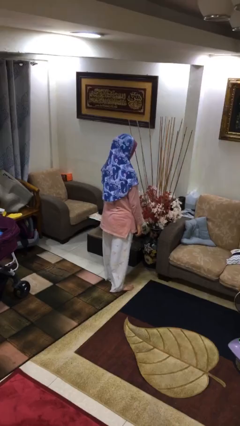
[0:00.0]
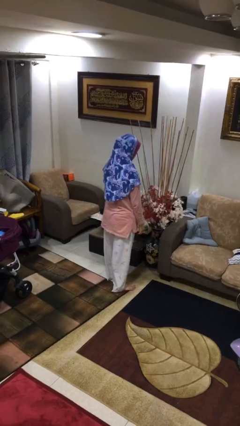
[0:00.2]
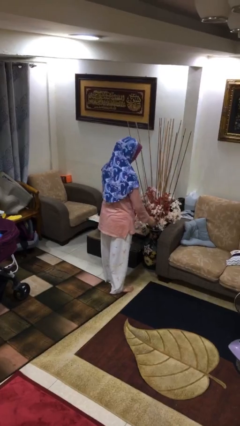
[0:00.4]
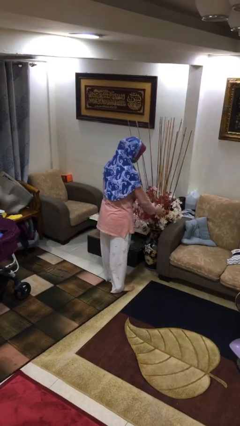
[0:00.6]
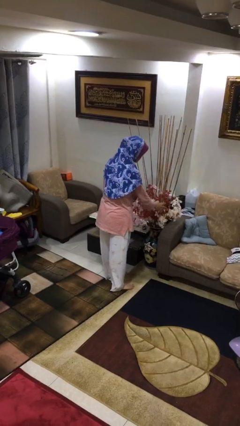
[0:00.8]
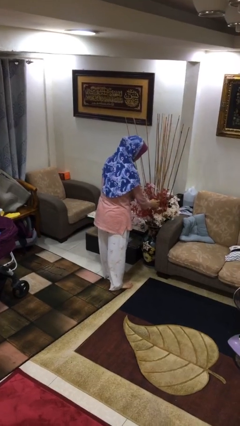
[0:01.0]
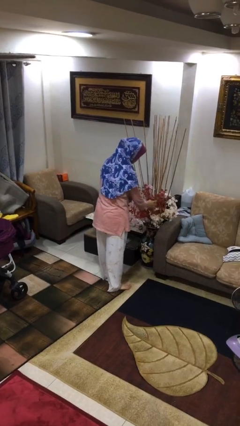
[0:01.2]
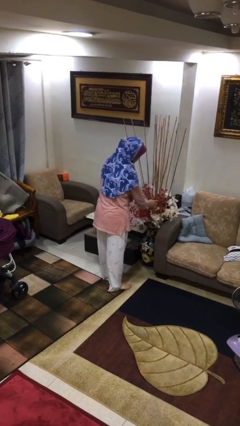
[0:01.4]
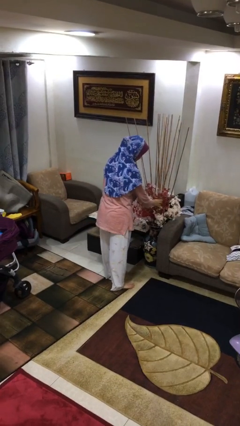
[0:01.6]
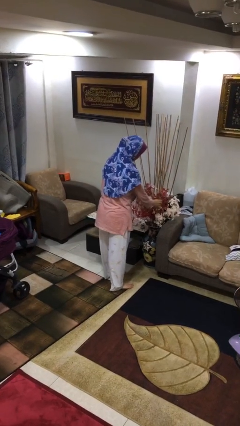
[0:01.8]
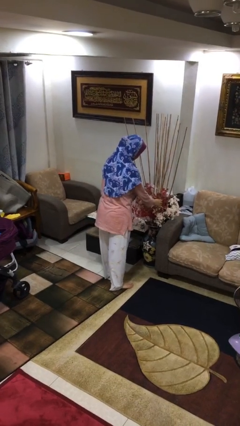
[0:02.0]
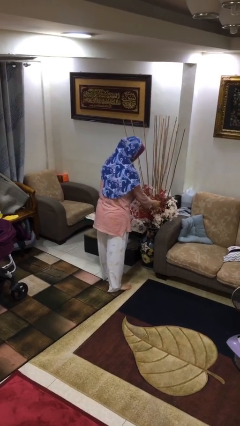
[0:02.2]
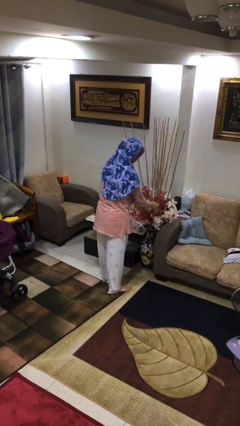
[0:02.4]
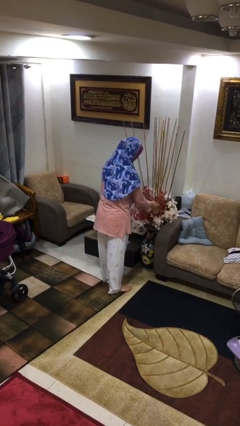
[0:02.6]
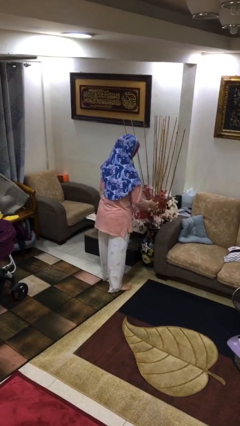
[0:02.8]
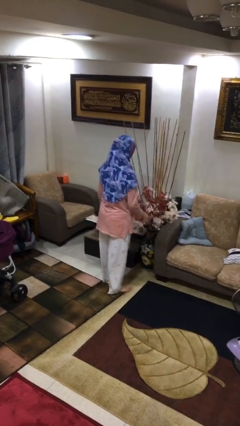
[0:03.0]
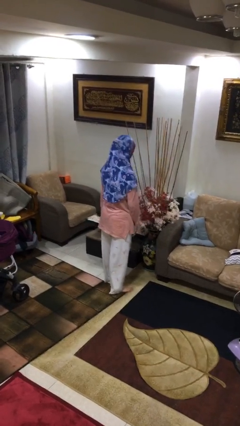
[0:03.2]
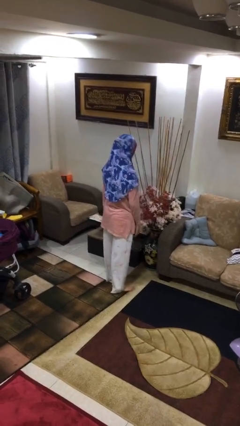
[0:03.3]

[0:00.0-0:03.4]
person arranges flowers in vase

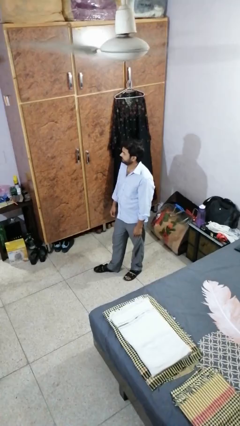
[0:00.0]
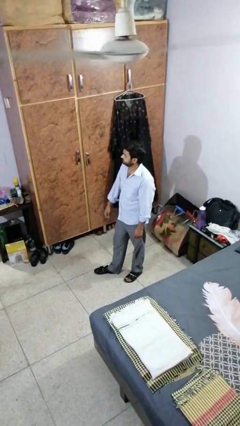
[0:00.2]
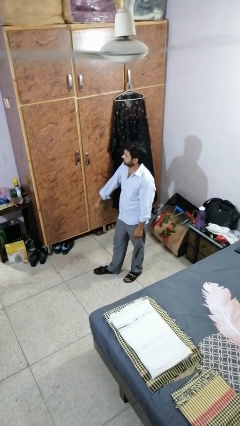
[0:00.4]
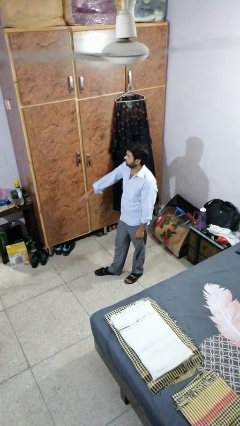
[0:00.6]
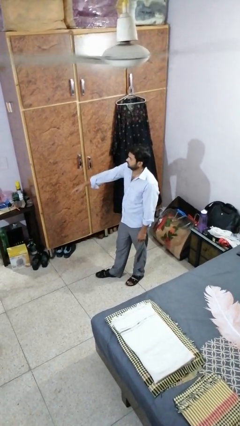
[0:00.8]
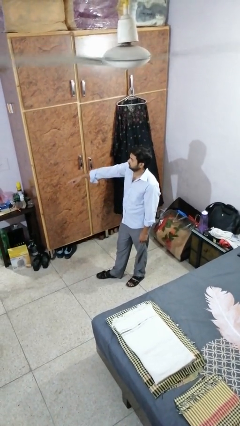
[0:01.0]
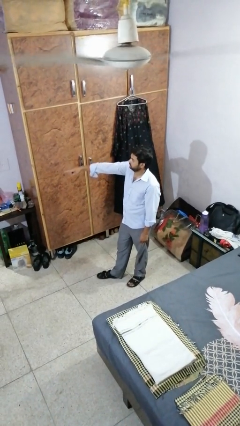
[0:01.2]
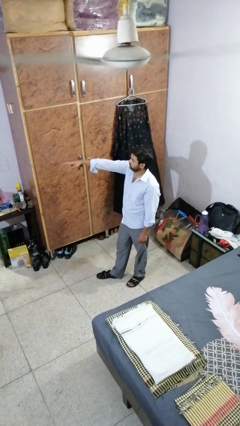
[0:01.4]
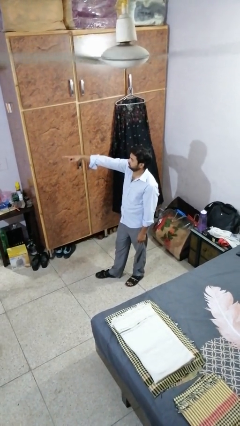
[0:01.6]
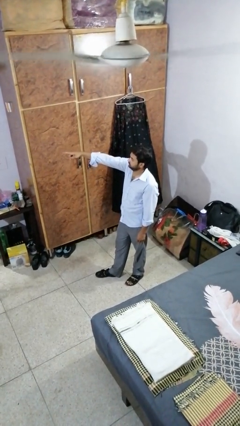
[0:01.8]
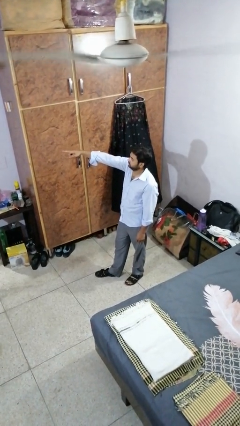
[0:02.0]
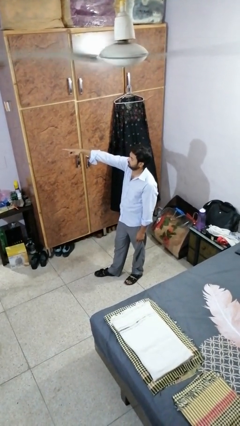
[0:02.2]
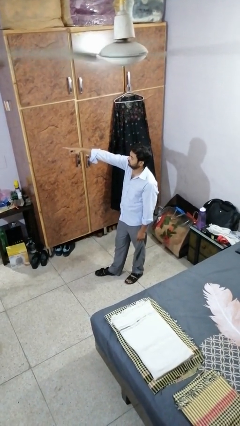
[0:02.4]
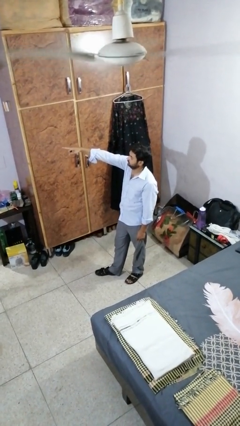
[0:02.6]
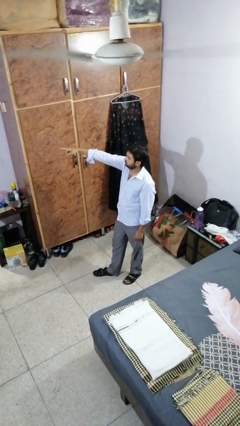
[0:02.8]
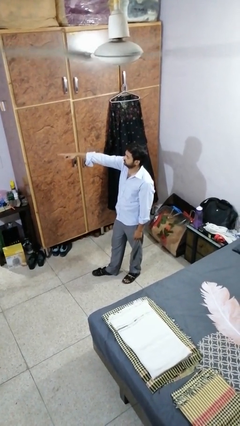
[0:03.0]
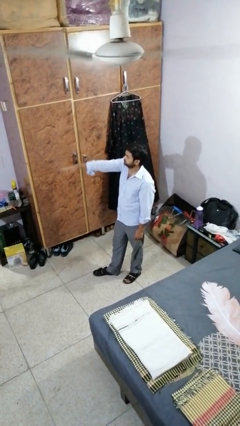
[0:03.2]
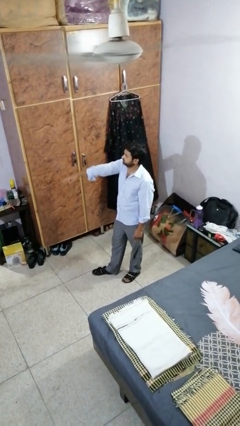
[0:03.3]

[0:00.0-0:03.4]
person points at person

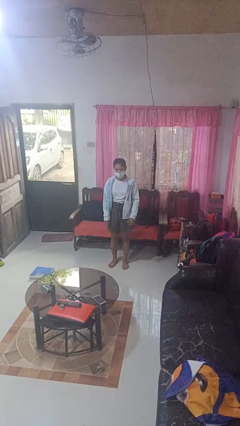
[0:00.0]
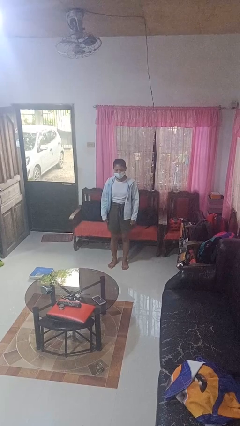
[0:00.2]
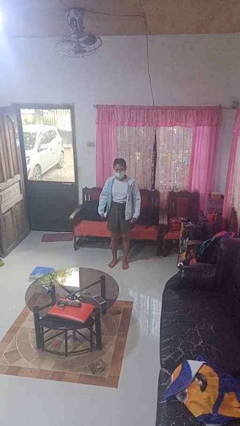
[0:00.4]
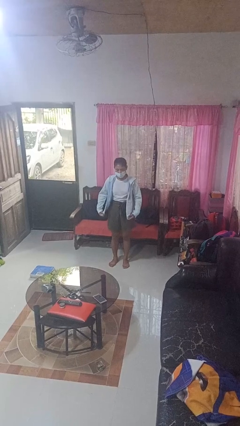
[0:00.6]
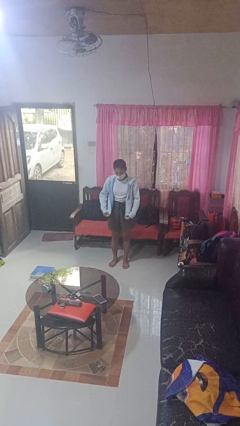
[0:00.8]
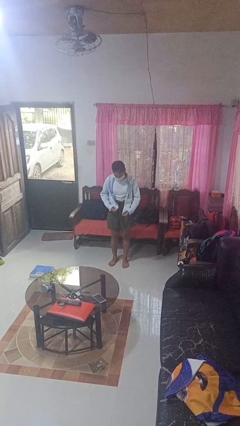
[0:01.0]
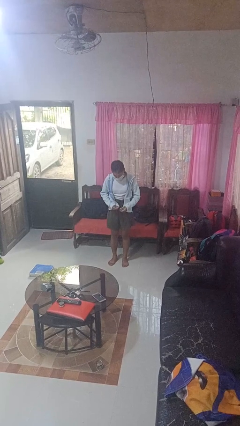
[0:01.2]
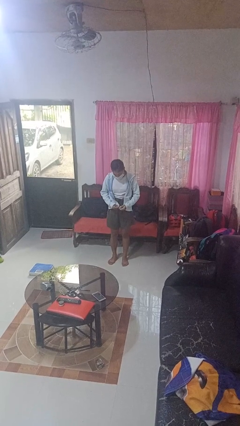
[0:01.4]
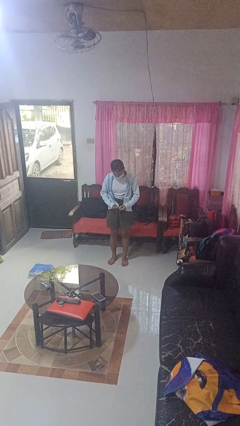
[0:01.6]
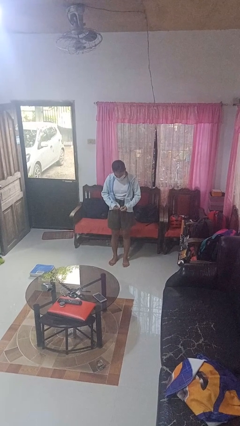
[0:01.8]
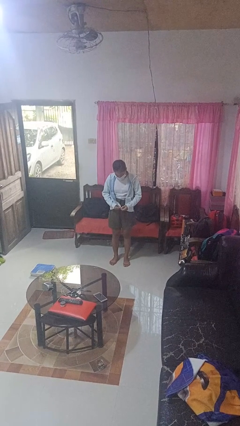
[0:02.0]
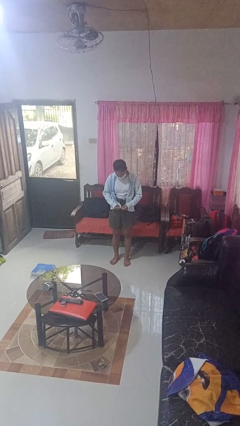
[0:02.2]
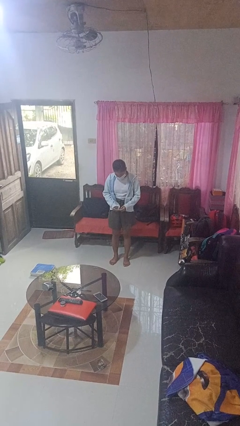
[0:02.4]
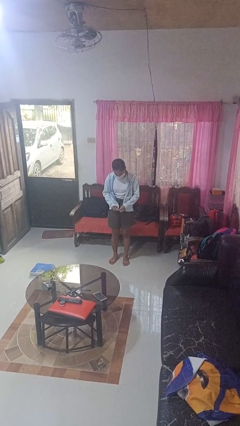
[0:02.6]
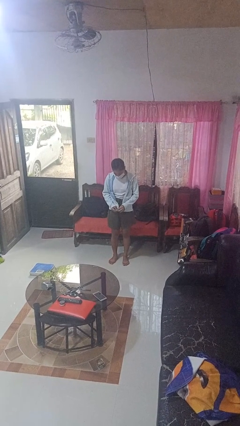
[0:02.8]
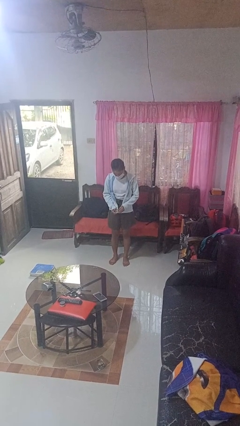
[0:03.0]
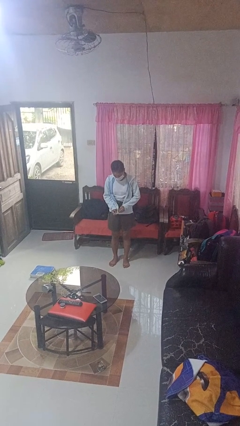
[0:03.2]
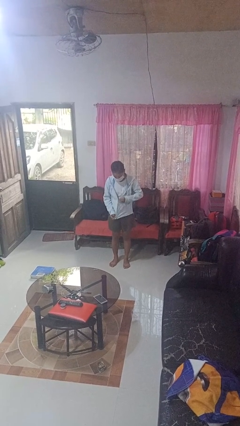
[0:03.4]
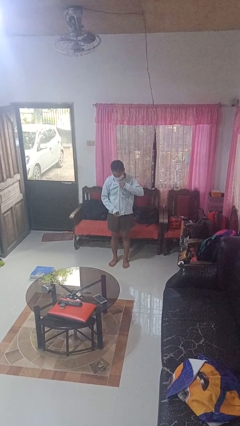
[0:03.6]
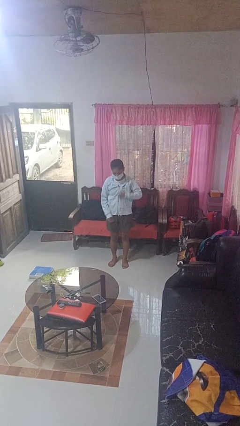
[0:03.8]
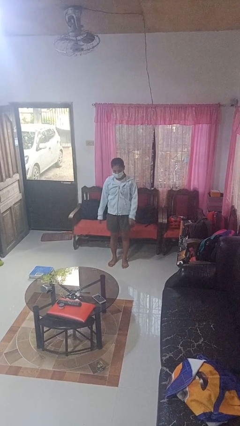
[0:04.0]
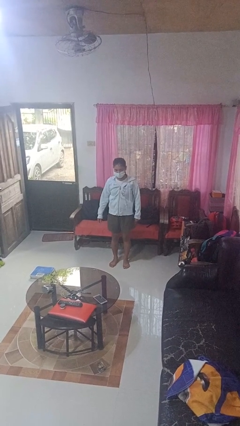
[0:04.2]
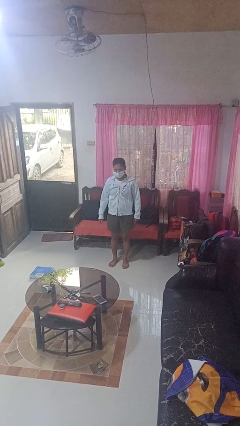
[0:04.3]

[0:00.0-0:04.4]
person zips up jacket

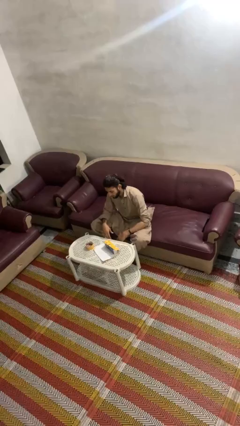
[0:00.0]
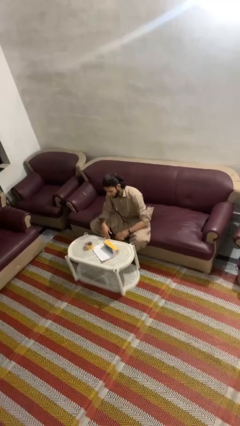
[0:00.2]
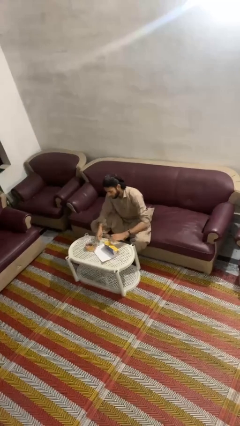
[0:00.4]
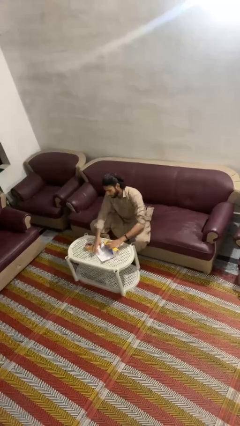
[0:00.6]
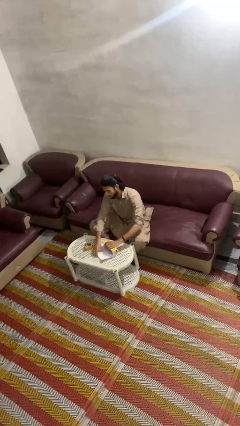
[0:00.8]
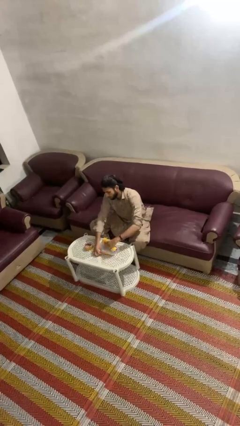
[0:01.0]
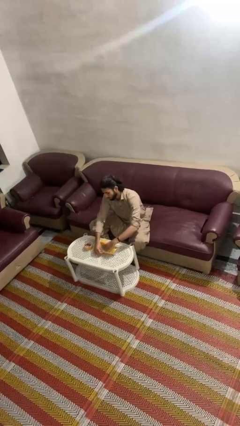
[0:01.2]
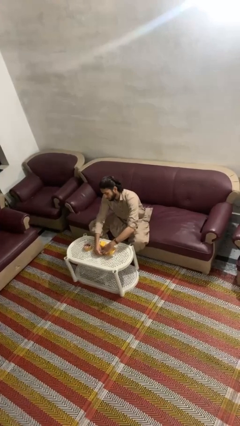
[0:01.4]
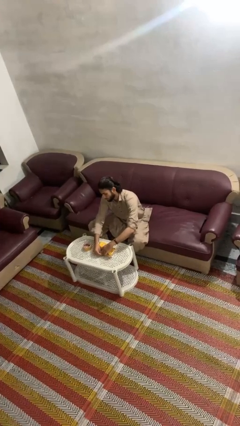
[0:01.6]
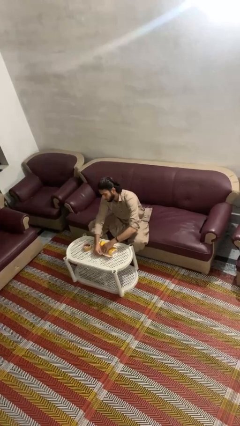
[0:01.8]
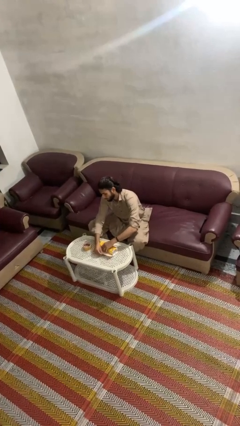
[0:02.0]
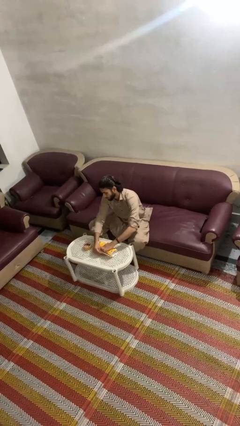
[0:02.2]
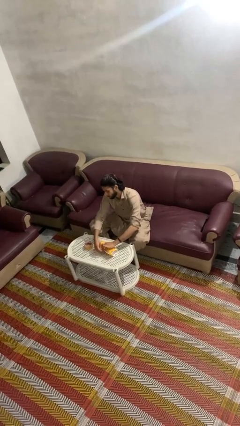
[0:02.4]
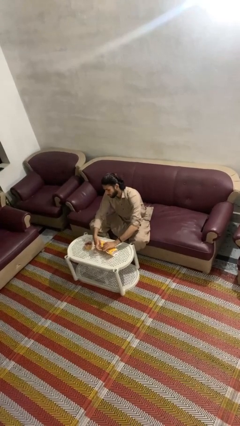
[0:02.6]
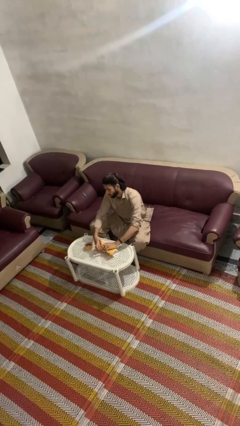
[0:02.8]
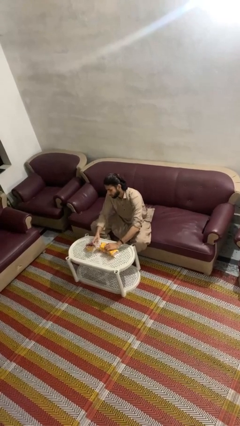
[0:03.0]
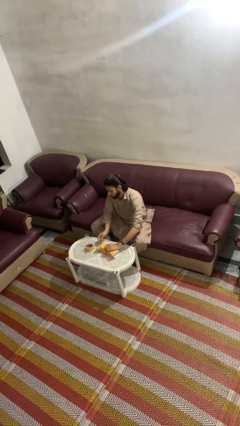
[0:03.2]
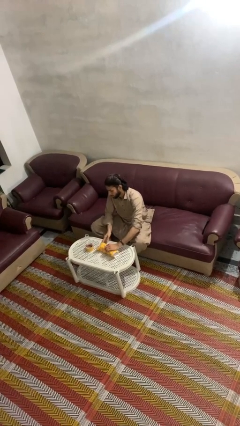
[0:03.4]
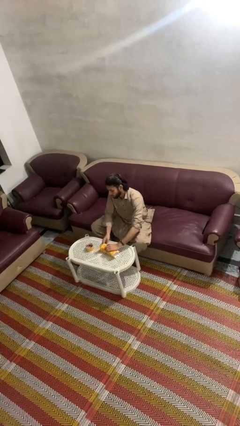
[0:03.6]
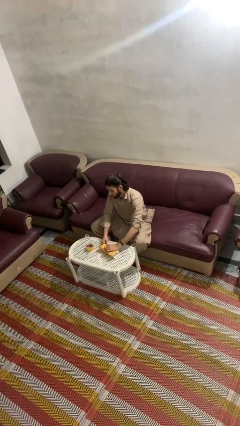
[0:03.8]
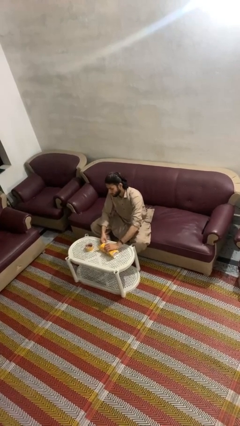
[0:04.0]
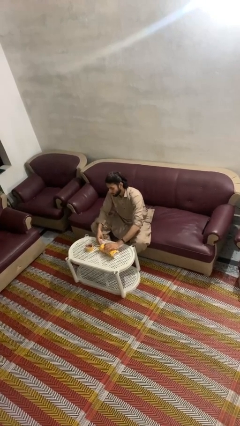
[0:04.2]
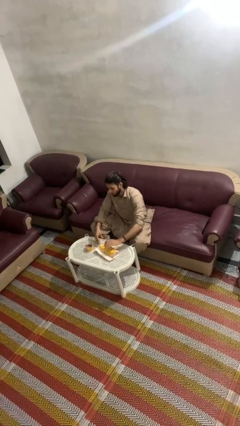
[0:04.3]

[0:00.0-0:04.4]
person wraps box

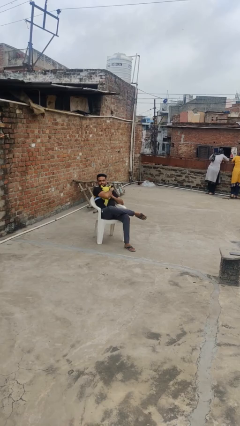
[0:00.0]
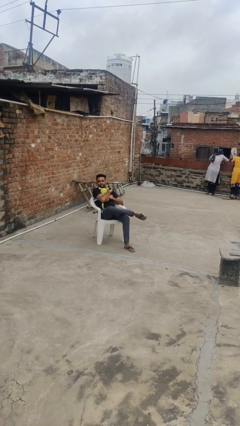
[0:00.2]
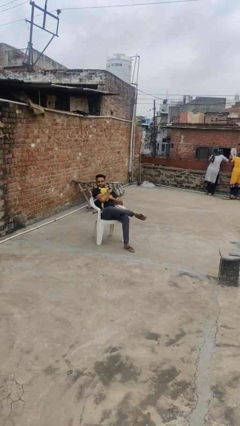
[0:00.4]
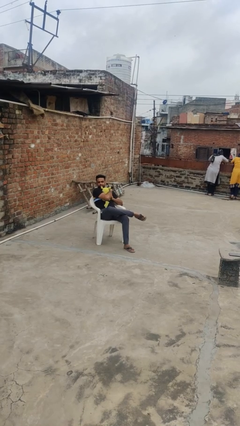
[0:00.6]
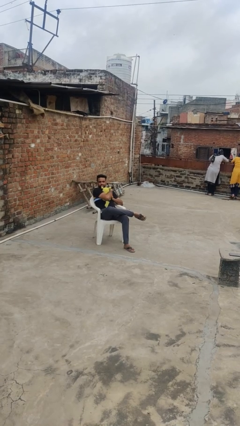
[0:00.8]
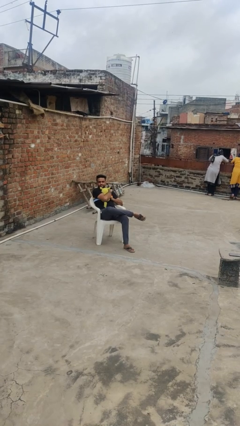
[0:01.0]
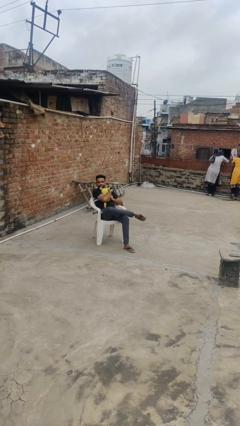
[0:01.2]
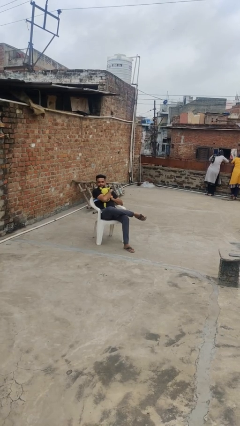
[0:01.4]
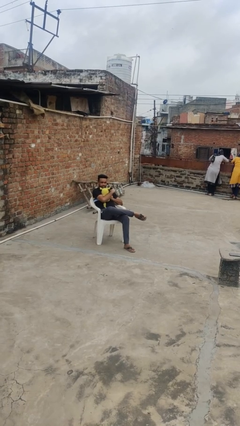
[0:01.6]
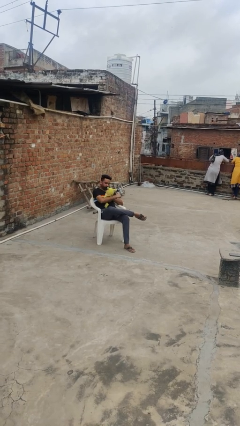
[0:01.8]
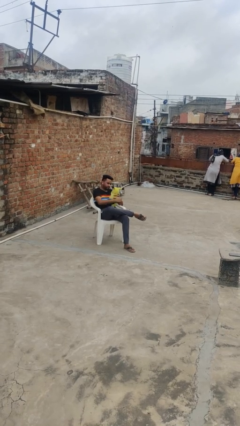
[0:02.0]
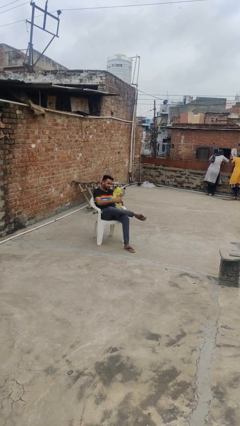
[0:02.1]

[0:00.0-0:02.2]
person hugs stuffed animal

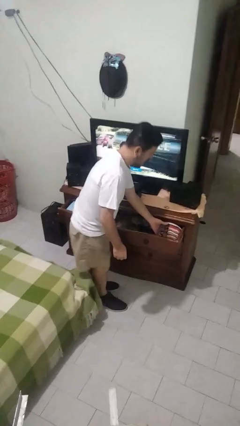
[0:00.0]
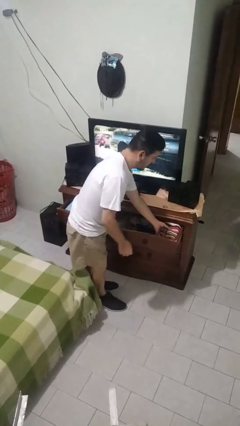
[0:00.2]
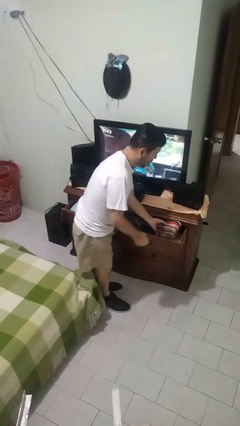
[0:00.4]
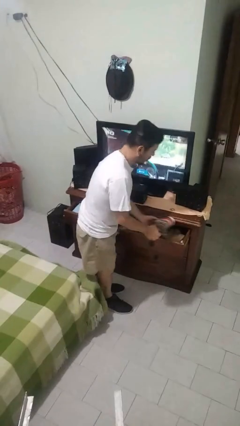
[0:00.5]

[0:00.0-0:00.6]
person takes clothes from dresser
